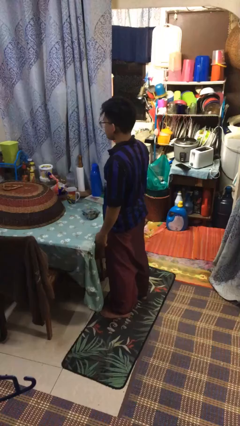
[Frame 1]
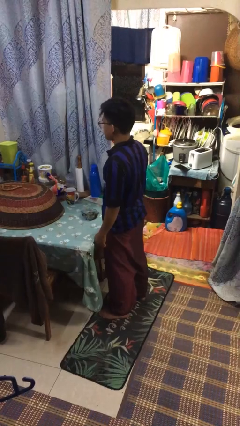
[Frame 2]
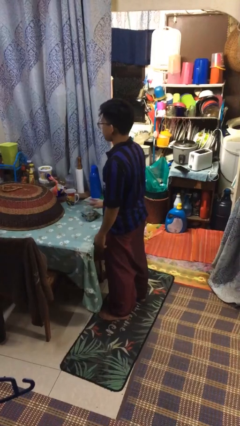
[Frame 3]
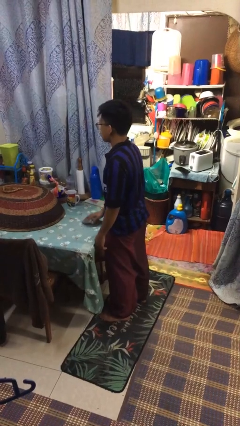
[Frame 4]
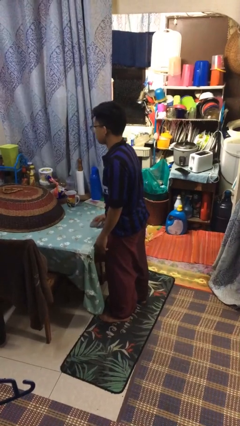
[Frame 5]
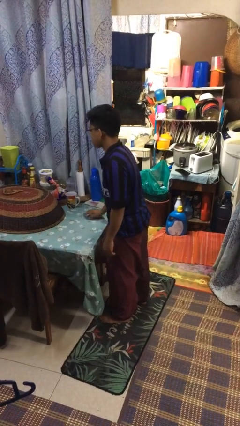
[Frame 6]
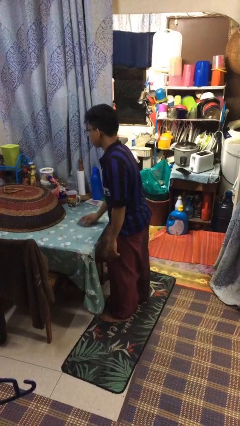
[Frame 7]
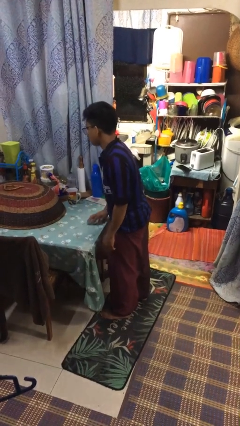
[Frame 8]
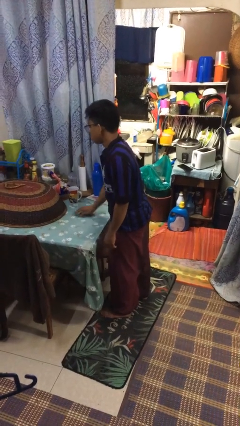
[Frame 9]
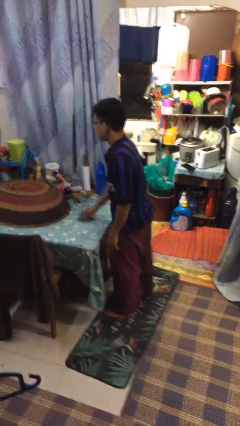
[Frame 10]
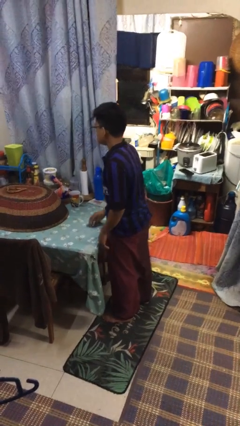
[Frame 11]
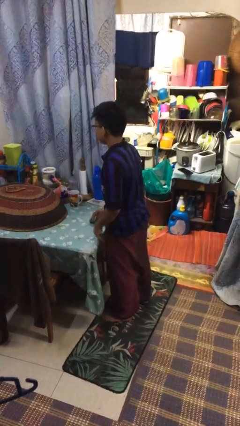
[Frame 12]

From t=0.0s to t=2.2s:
person cleans table with rag

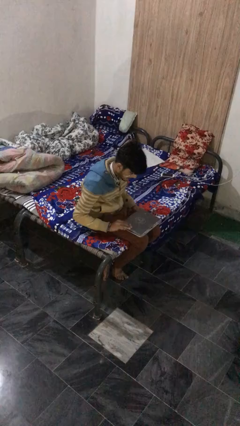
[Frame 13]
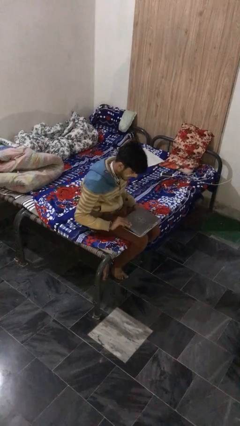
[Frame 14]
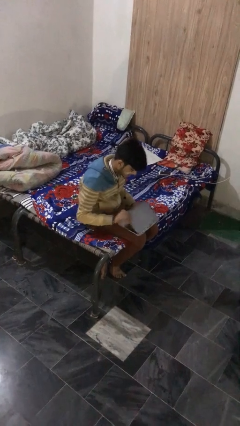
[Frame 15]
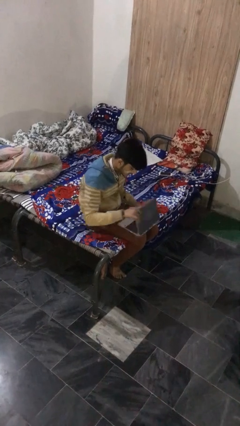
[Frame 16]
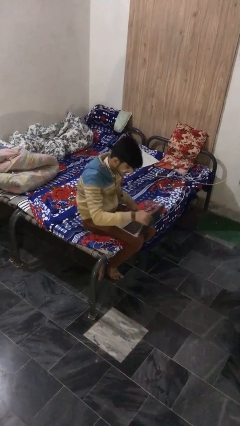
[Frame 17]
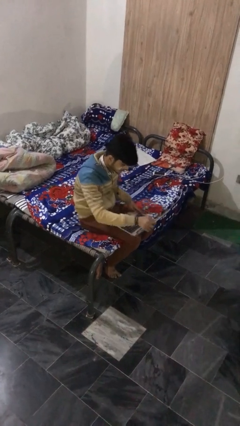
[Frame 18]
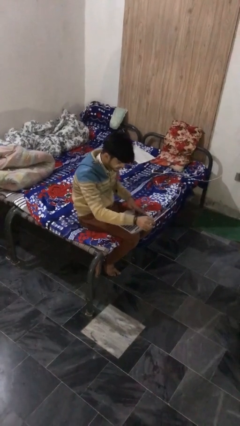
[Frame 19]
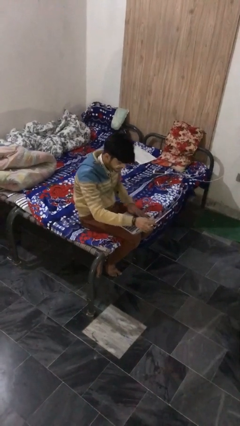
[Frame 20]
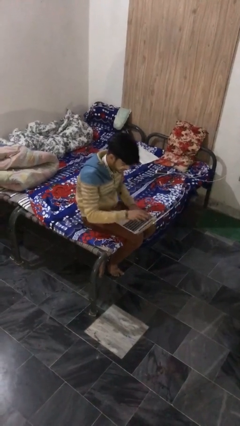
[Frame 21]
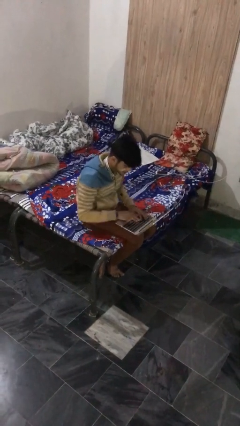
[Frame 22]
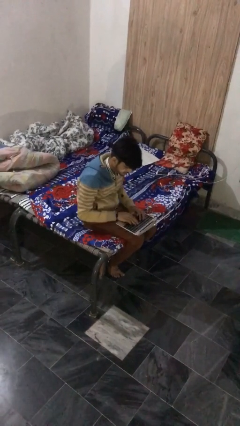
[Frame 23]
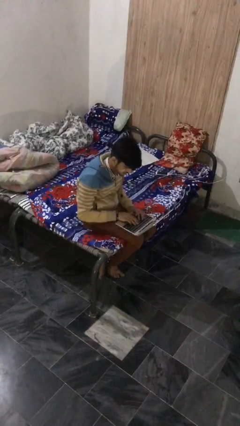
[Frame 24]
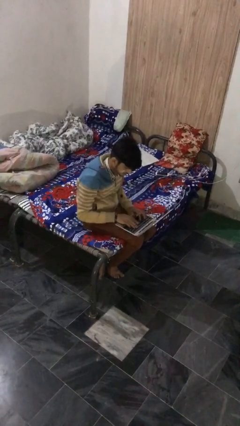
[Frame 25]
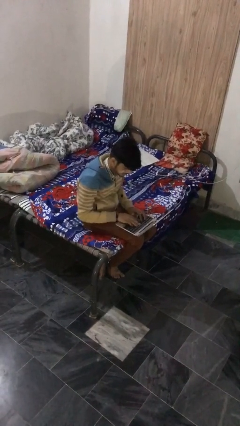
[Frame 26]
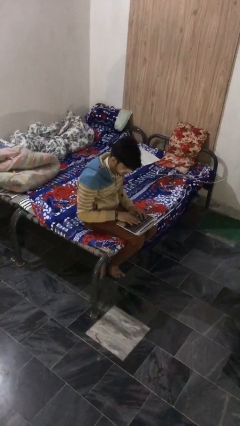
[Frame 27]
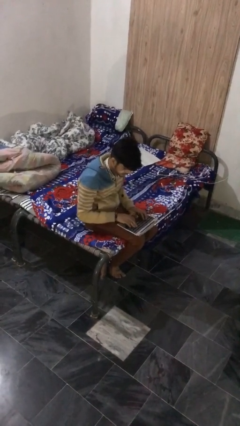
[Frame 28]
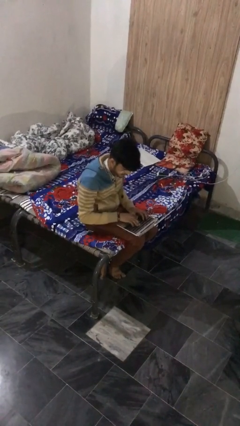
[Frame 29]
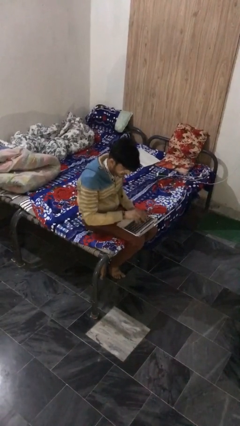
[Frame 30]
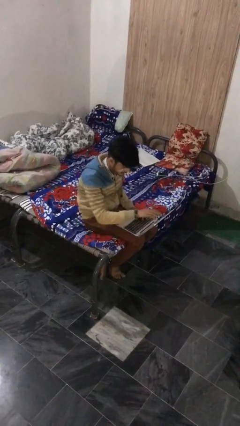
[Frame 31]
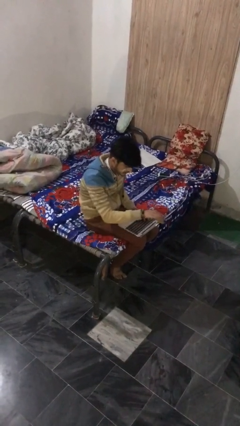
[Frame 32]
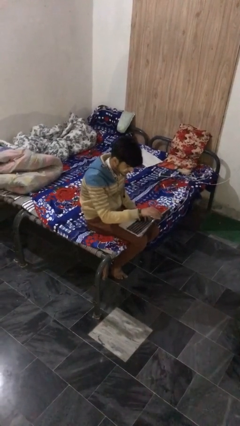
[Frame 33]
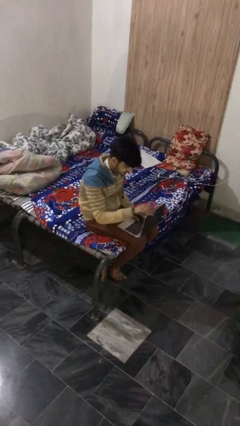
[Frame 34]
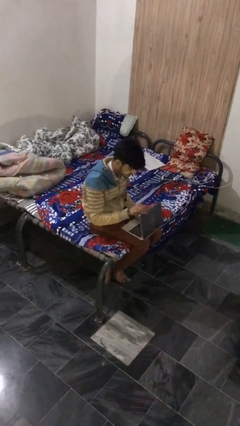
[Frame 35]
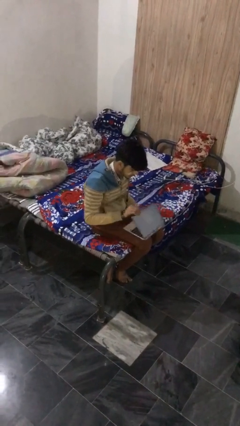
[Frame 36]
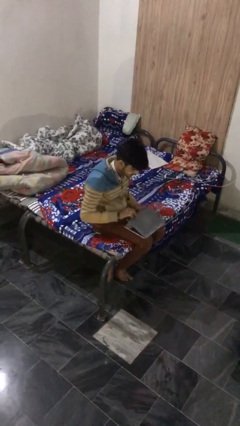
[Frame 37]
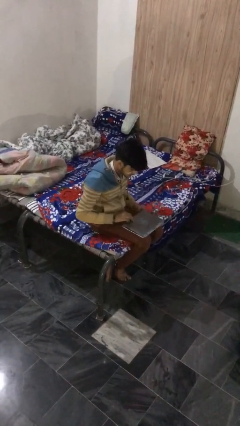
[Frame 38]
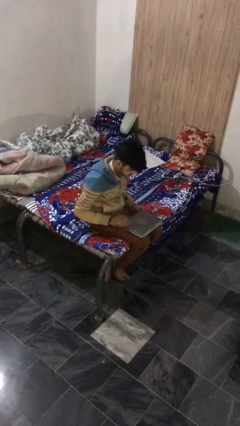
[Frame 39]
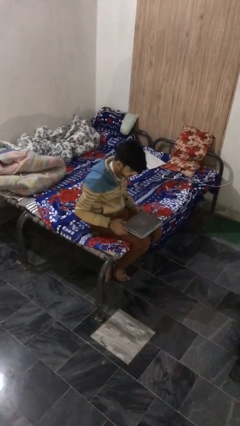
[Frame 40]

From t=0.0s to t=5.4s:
person interacts with laptop

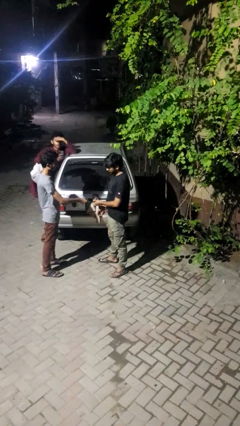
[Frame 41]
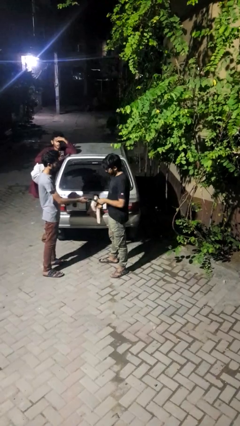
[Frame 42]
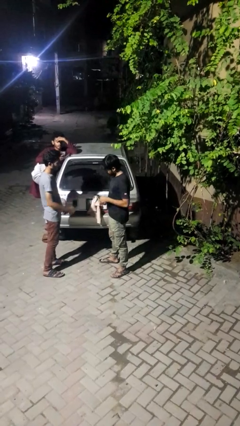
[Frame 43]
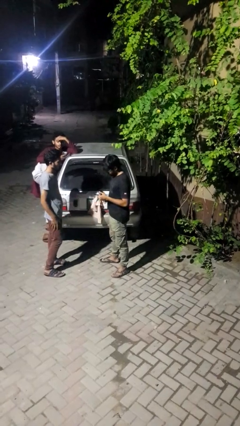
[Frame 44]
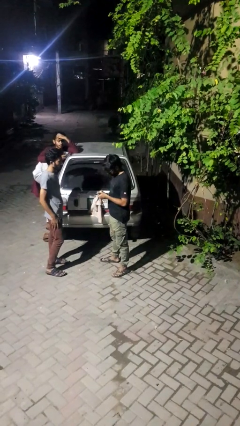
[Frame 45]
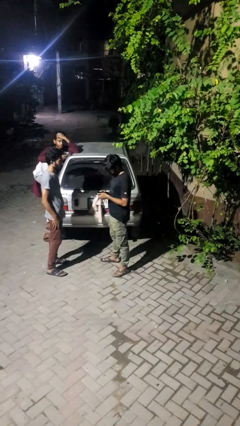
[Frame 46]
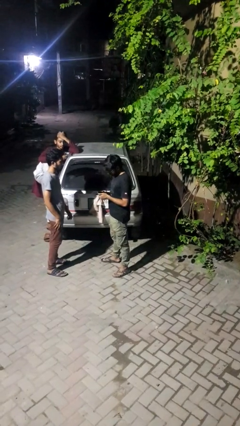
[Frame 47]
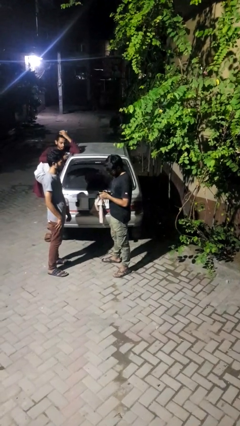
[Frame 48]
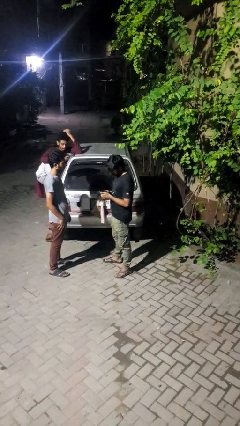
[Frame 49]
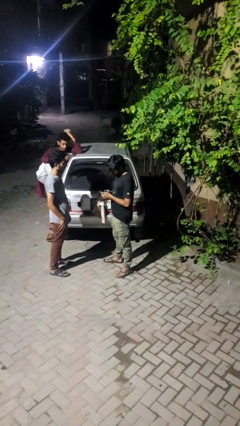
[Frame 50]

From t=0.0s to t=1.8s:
person transfers object to person

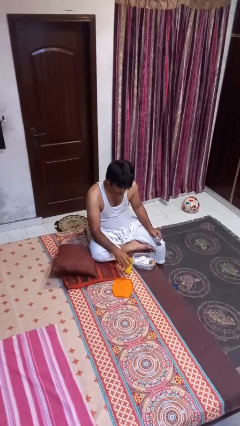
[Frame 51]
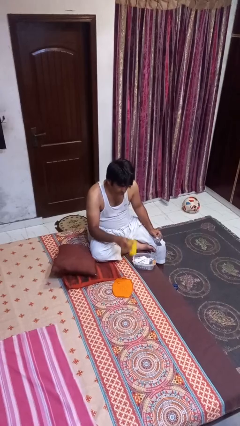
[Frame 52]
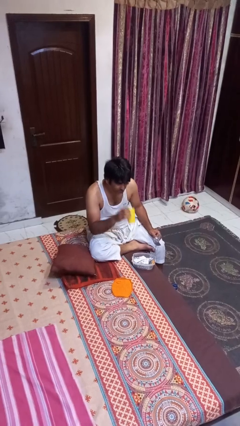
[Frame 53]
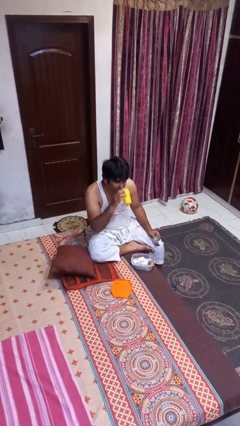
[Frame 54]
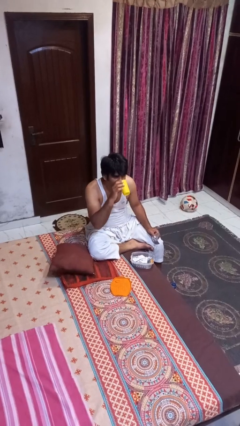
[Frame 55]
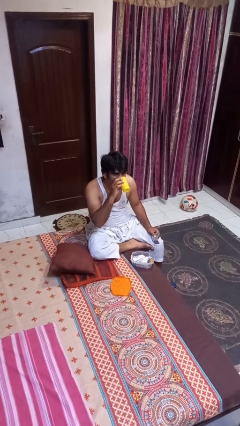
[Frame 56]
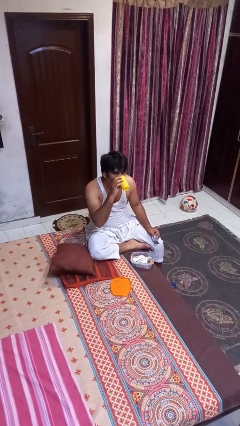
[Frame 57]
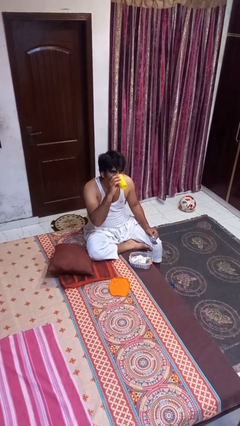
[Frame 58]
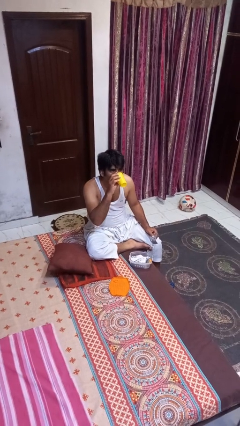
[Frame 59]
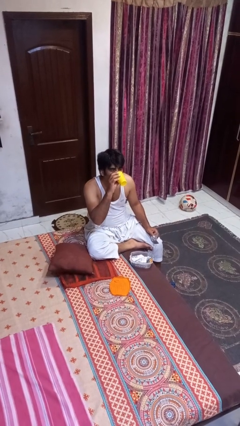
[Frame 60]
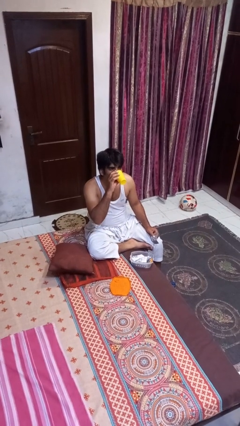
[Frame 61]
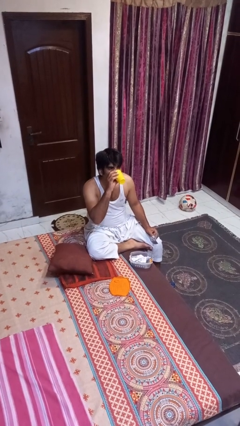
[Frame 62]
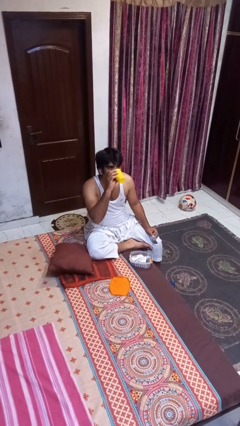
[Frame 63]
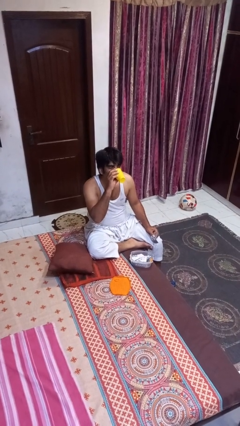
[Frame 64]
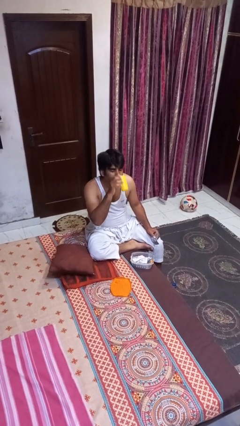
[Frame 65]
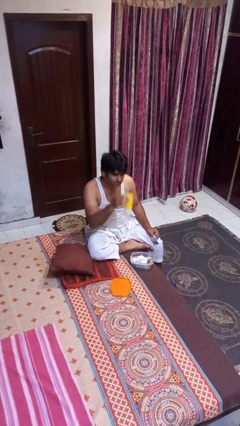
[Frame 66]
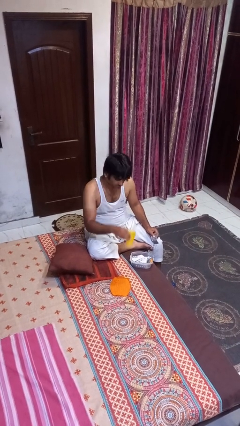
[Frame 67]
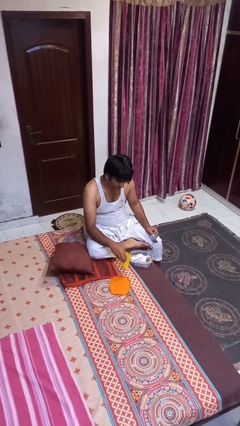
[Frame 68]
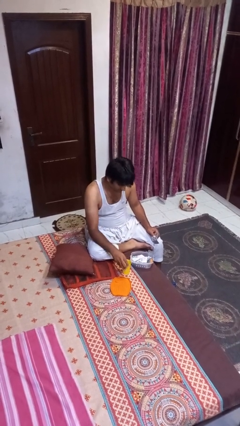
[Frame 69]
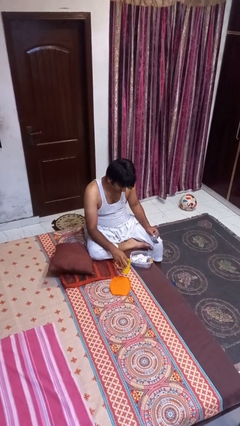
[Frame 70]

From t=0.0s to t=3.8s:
person drinks from cup

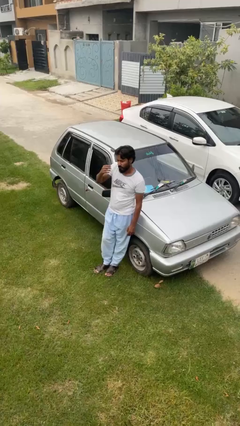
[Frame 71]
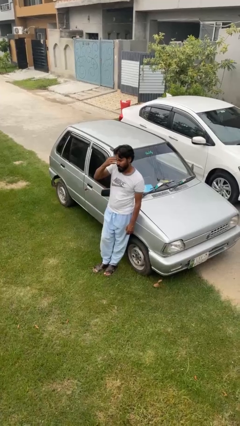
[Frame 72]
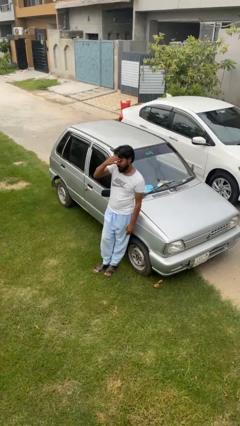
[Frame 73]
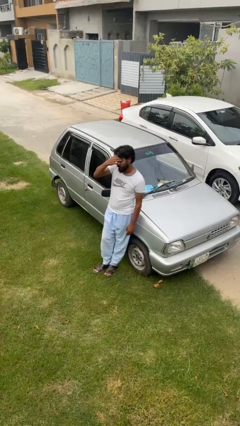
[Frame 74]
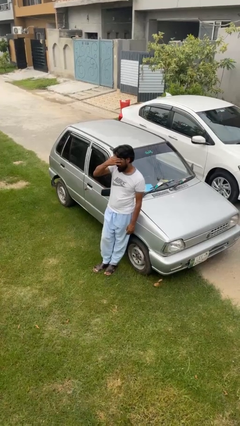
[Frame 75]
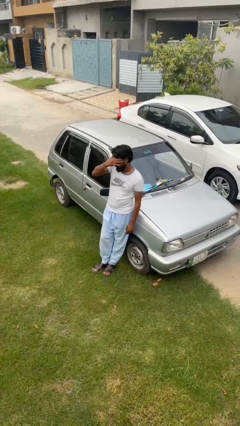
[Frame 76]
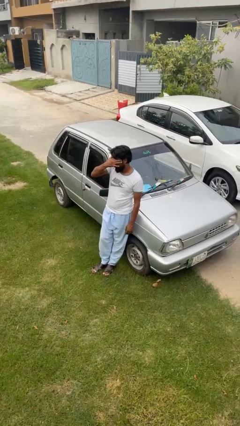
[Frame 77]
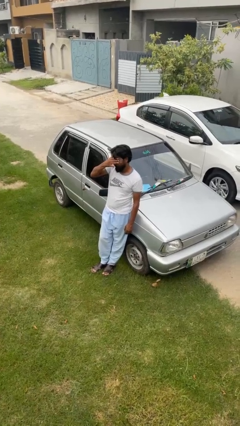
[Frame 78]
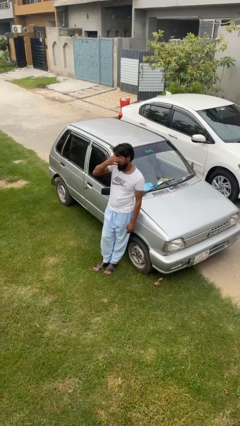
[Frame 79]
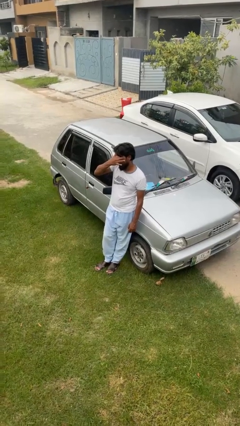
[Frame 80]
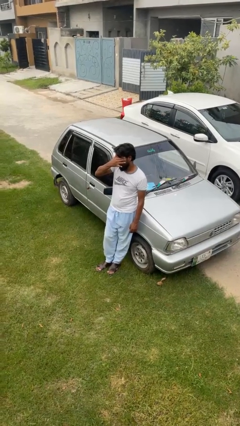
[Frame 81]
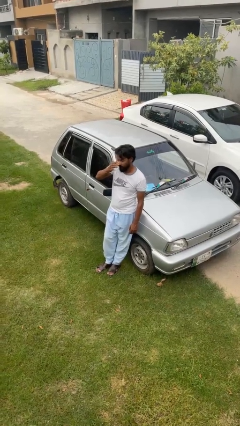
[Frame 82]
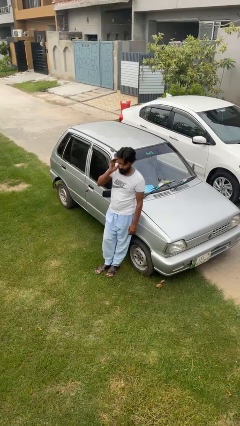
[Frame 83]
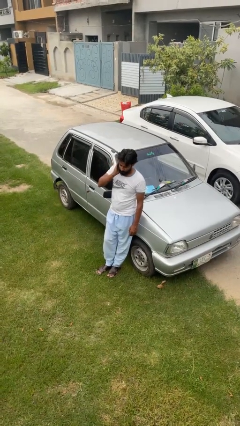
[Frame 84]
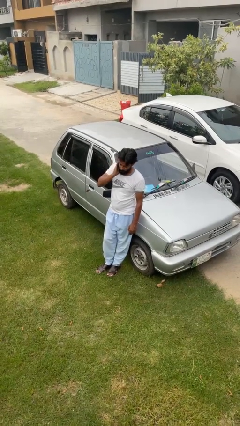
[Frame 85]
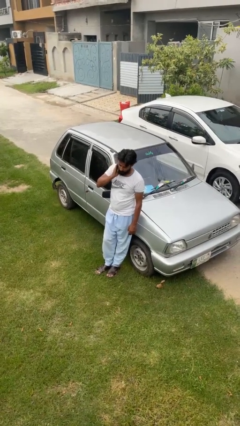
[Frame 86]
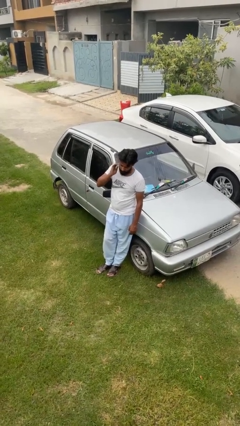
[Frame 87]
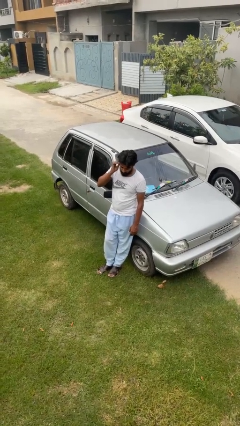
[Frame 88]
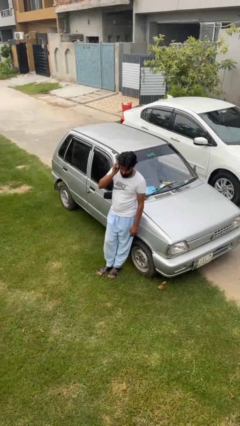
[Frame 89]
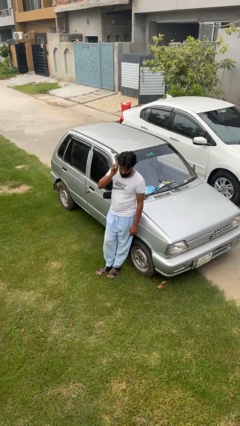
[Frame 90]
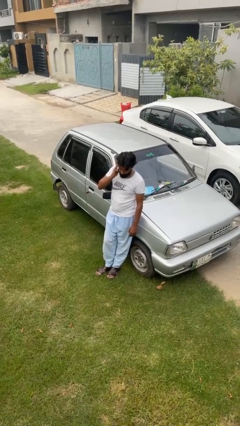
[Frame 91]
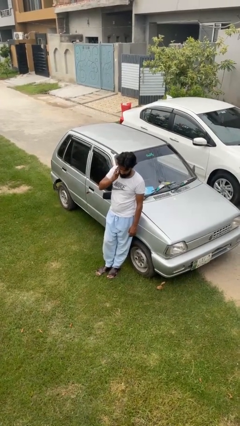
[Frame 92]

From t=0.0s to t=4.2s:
person scratches face
